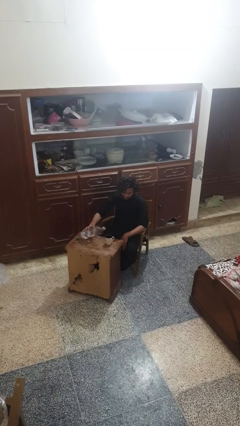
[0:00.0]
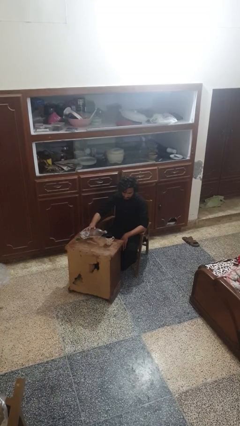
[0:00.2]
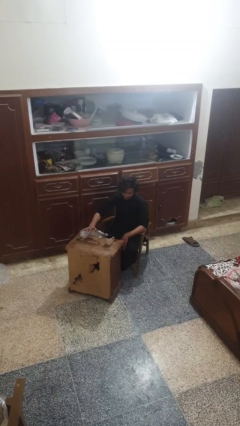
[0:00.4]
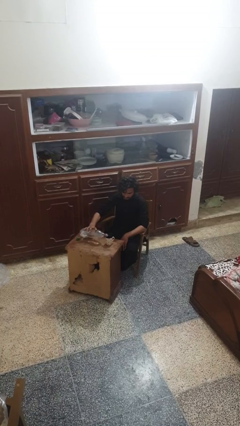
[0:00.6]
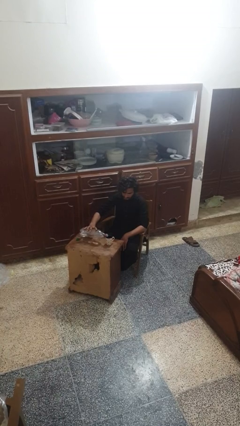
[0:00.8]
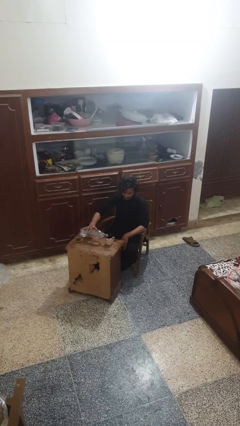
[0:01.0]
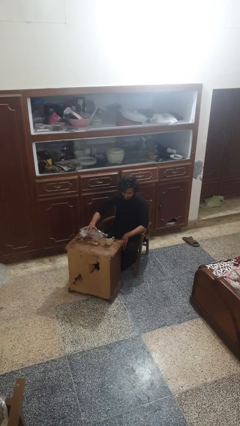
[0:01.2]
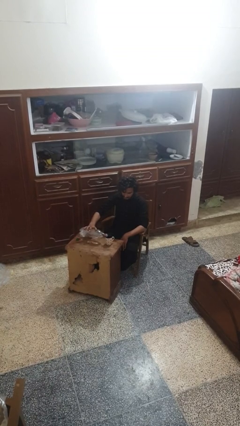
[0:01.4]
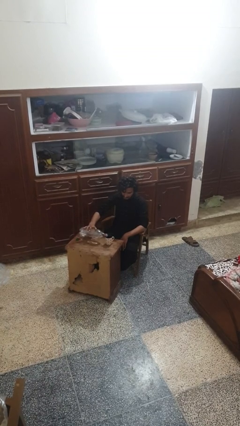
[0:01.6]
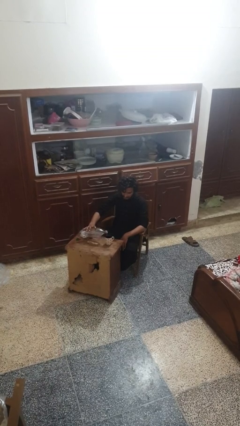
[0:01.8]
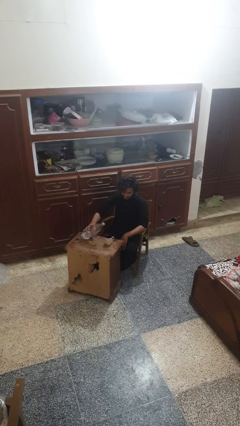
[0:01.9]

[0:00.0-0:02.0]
person pours liquid into cup

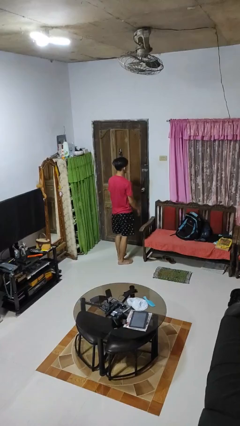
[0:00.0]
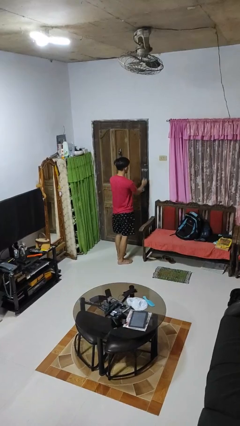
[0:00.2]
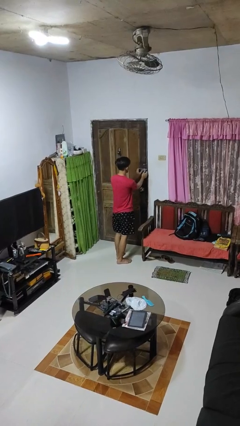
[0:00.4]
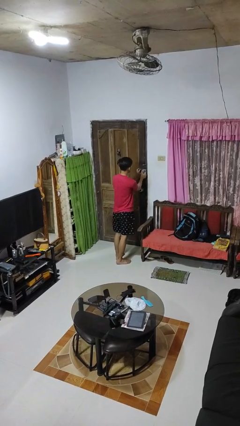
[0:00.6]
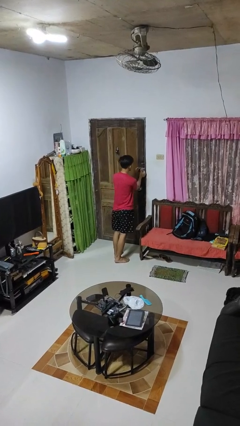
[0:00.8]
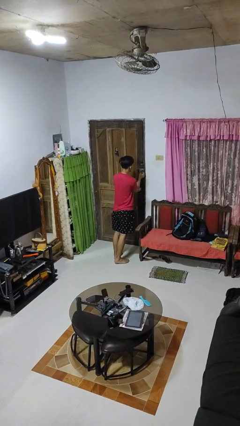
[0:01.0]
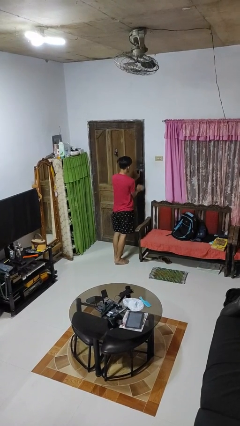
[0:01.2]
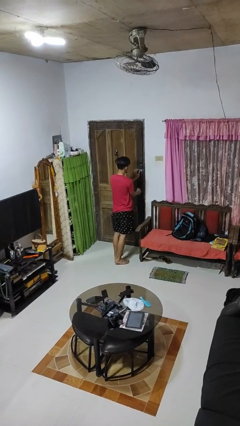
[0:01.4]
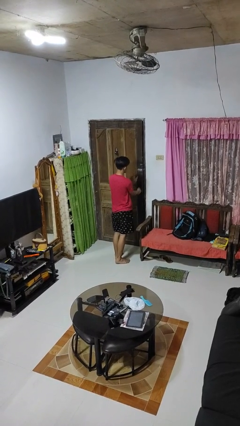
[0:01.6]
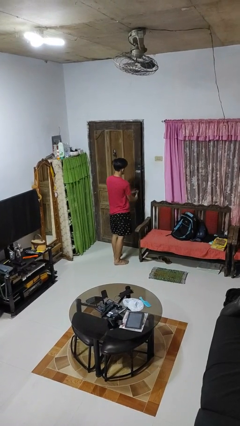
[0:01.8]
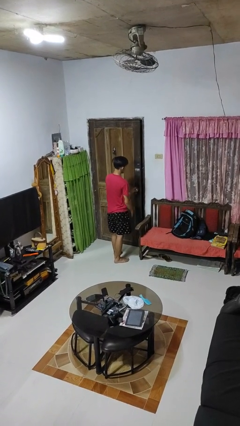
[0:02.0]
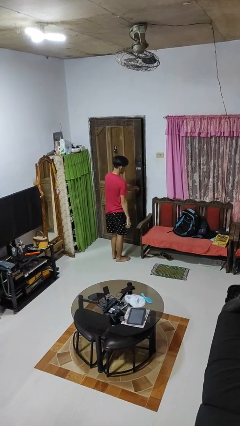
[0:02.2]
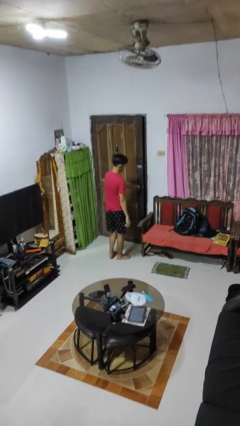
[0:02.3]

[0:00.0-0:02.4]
person unlocks door with keys

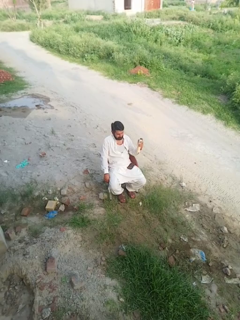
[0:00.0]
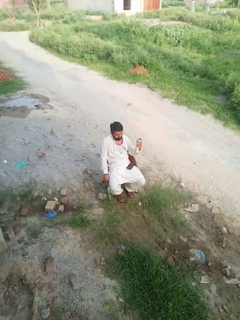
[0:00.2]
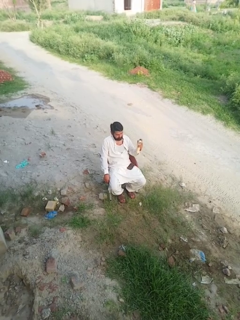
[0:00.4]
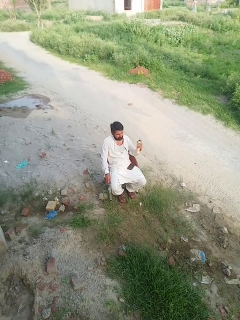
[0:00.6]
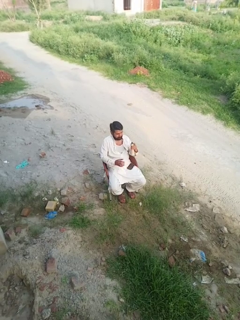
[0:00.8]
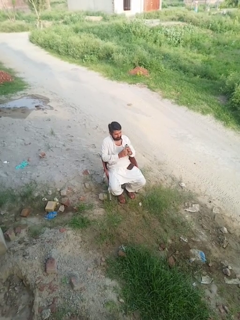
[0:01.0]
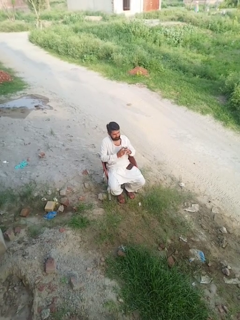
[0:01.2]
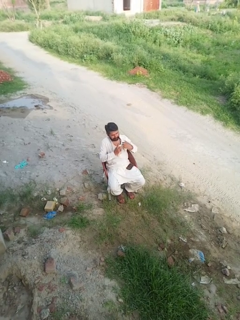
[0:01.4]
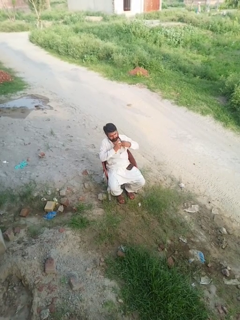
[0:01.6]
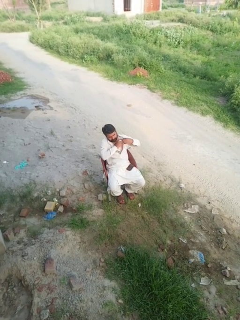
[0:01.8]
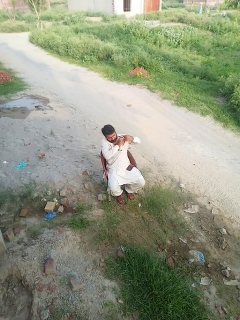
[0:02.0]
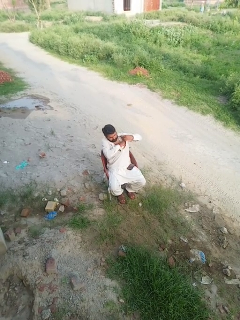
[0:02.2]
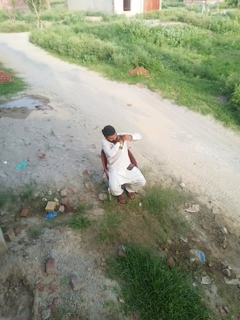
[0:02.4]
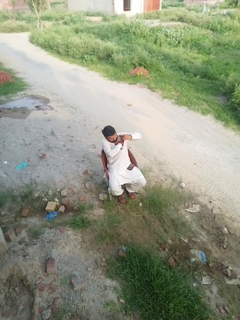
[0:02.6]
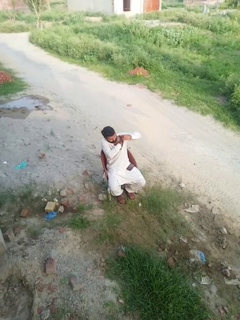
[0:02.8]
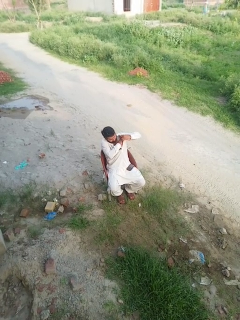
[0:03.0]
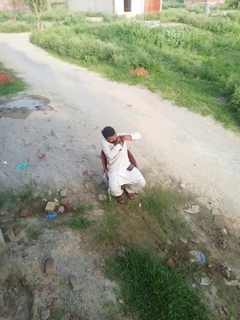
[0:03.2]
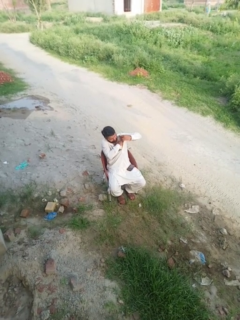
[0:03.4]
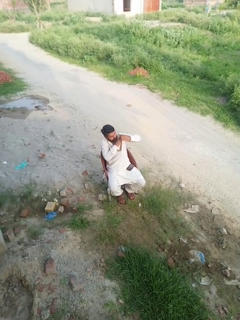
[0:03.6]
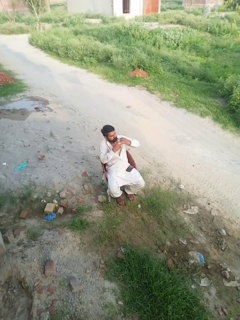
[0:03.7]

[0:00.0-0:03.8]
person applies deodorant

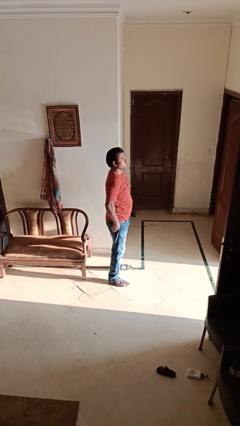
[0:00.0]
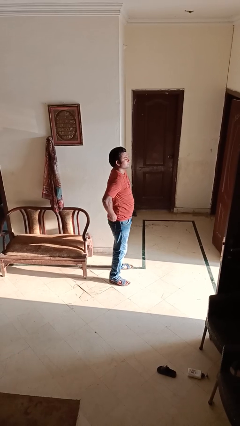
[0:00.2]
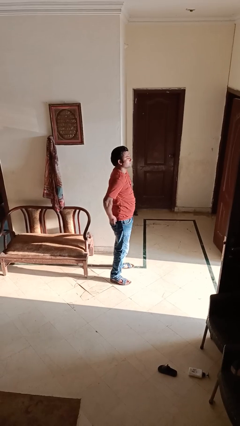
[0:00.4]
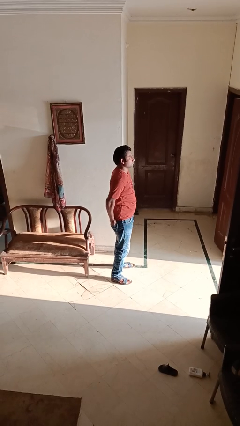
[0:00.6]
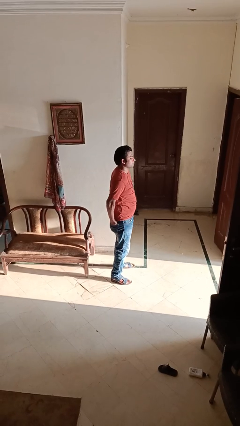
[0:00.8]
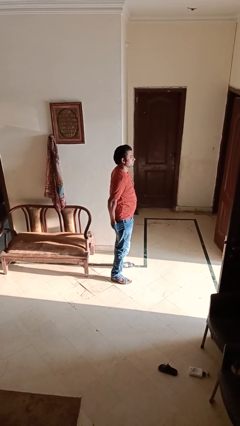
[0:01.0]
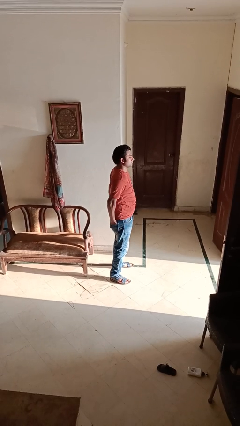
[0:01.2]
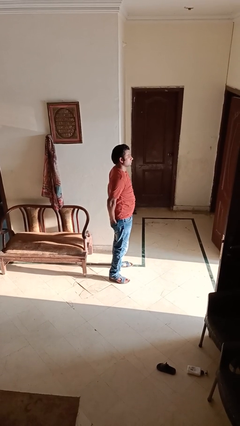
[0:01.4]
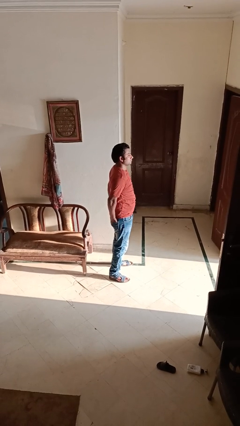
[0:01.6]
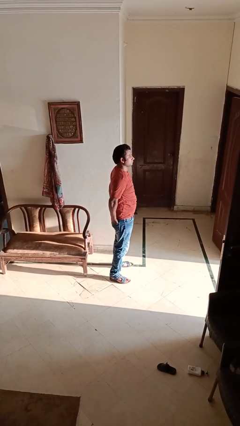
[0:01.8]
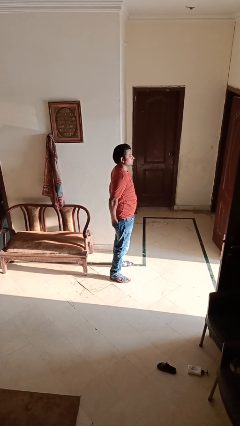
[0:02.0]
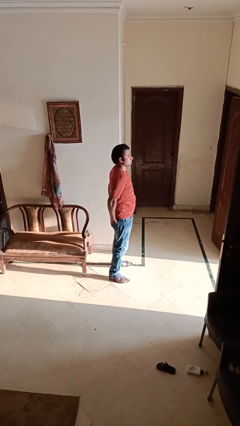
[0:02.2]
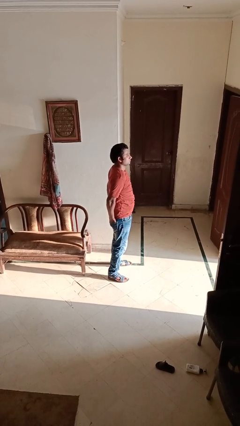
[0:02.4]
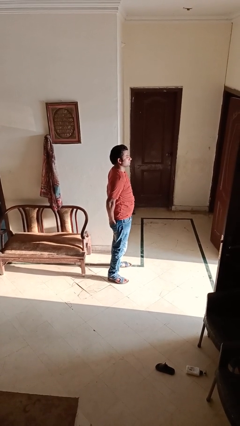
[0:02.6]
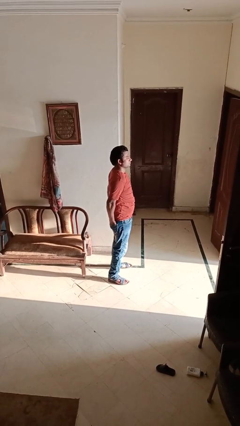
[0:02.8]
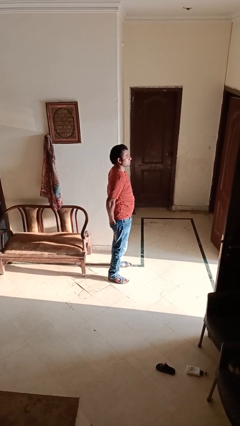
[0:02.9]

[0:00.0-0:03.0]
person puts hands in back pockets

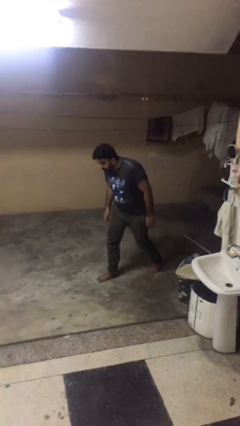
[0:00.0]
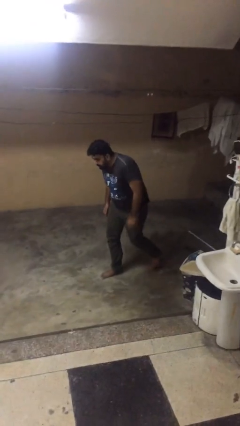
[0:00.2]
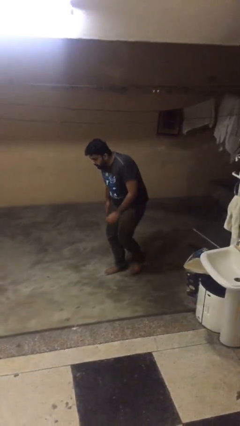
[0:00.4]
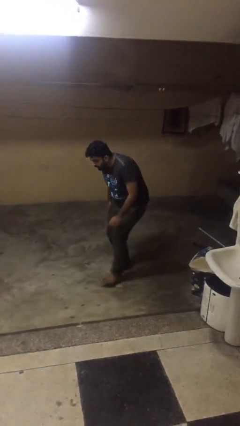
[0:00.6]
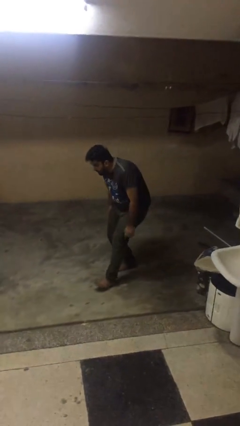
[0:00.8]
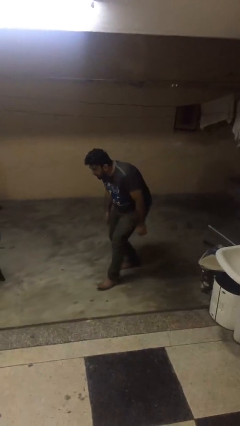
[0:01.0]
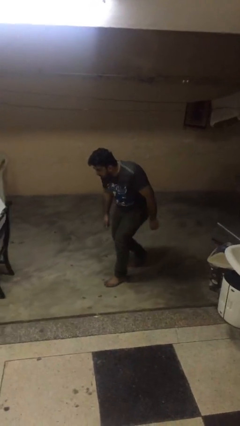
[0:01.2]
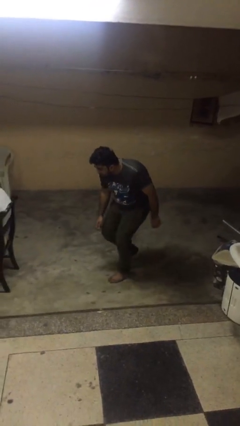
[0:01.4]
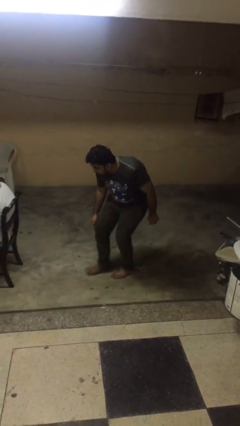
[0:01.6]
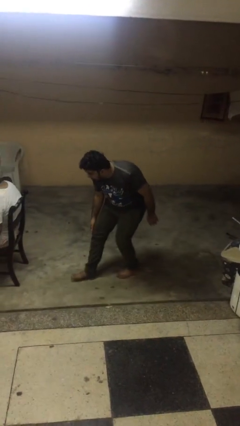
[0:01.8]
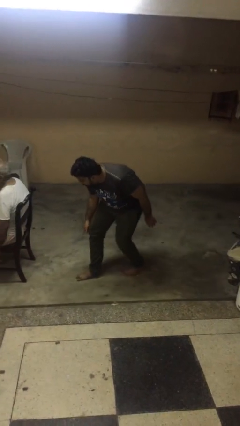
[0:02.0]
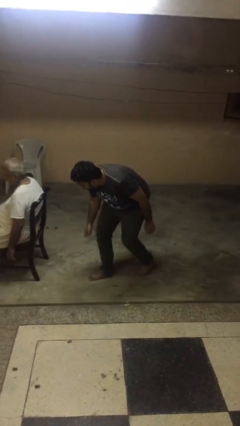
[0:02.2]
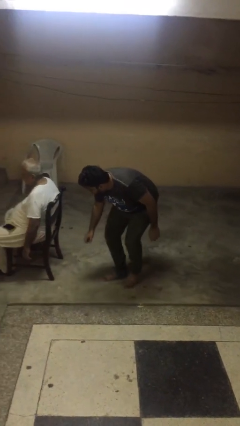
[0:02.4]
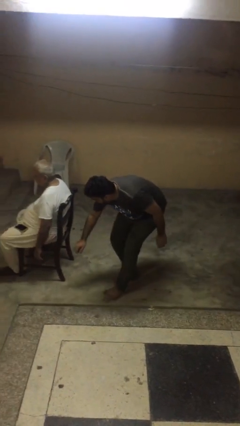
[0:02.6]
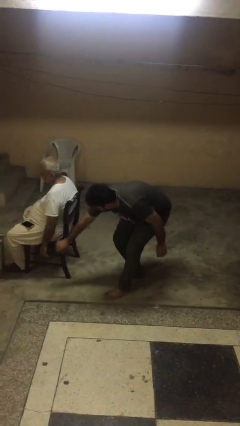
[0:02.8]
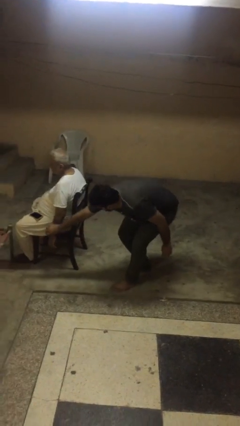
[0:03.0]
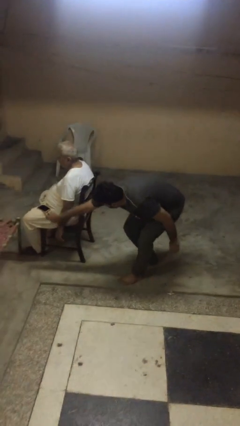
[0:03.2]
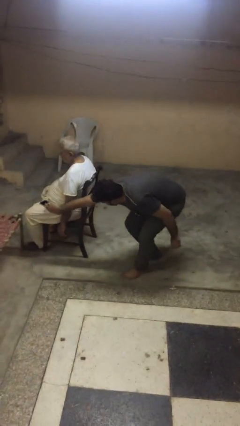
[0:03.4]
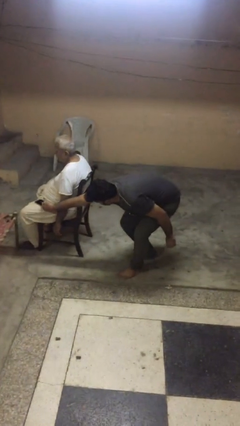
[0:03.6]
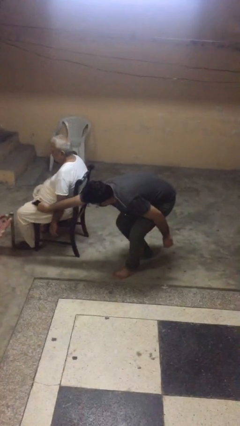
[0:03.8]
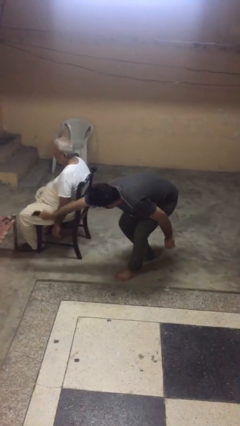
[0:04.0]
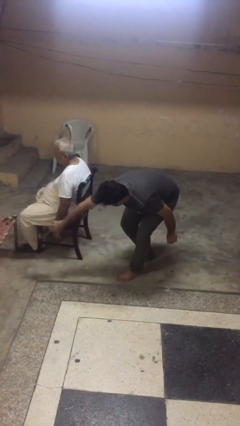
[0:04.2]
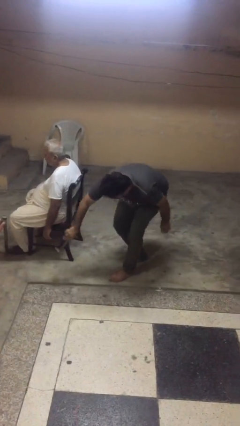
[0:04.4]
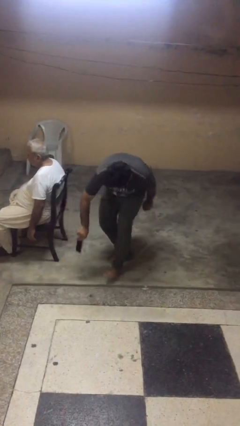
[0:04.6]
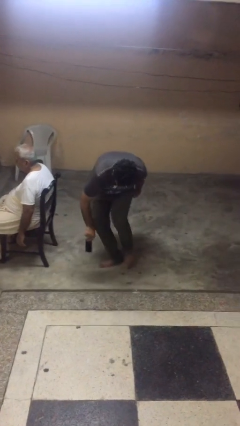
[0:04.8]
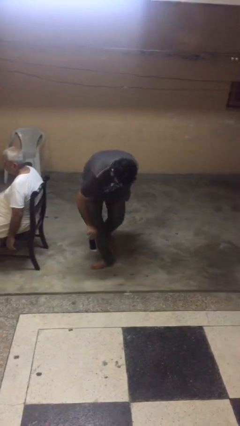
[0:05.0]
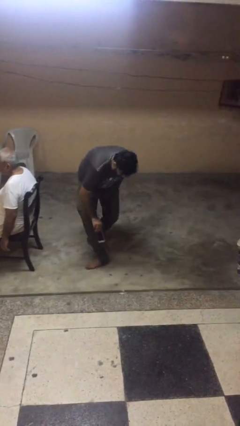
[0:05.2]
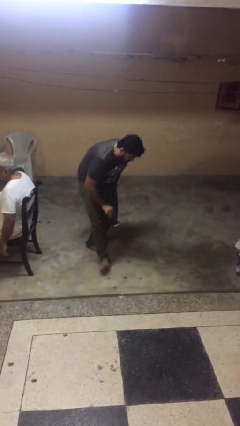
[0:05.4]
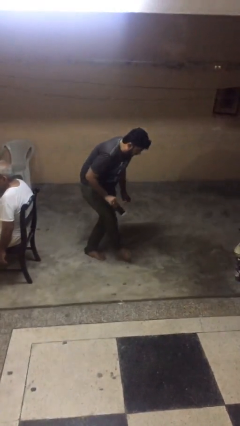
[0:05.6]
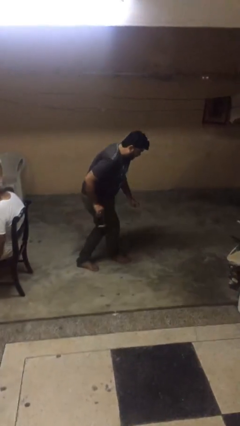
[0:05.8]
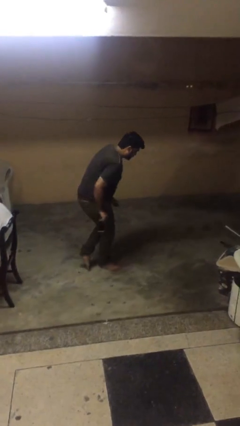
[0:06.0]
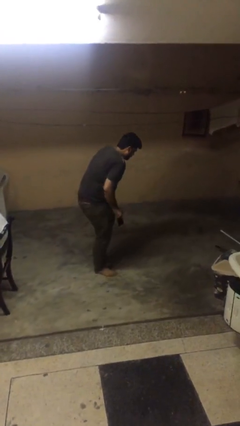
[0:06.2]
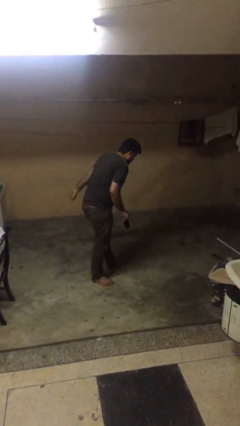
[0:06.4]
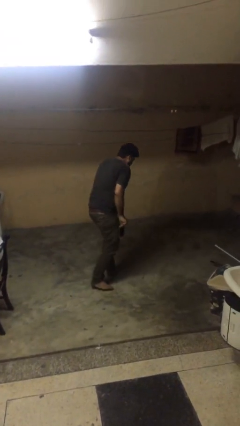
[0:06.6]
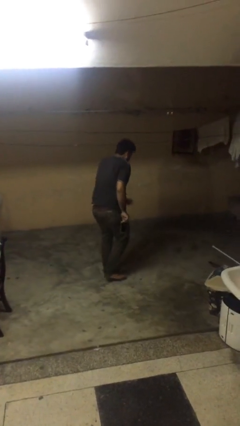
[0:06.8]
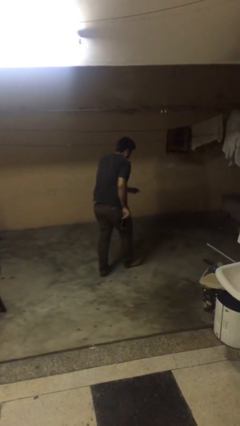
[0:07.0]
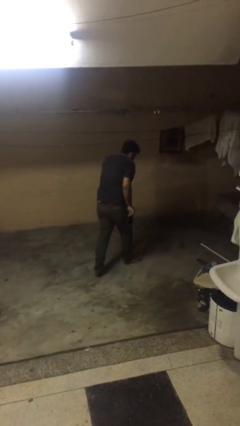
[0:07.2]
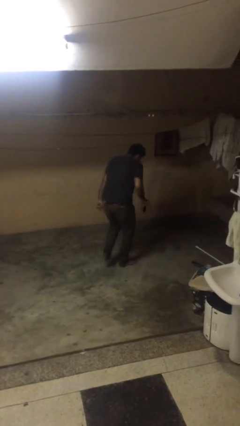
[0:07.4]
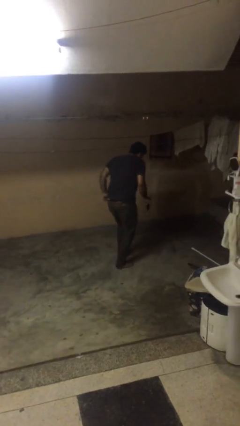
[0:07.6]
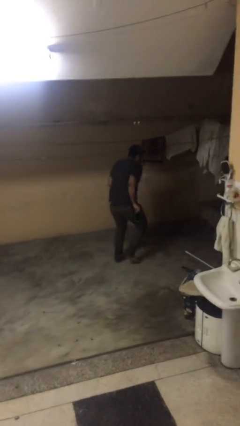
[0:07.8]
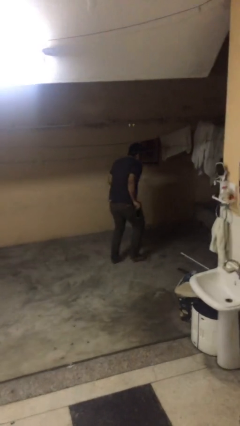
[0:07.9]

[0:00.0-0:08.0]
person steals object from person
